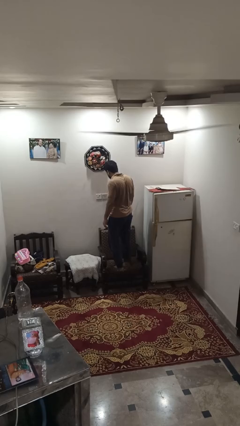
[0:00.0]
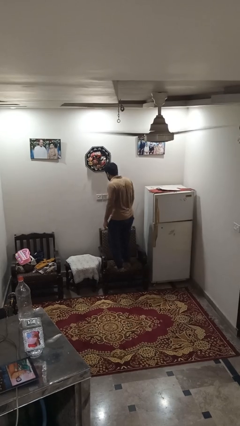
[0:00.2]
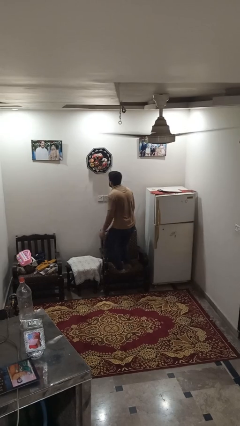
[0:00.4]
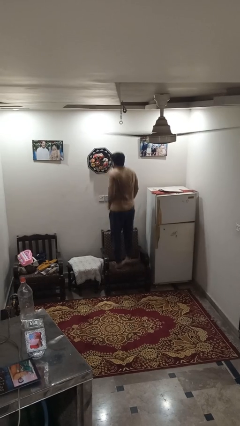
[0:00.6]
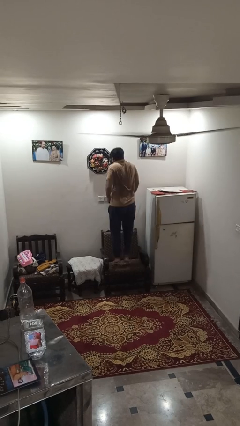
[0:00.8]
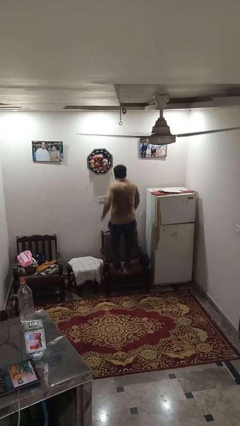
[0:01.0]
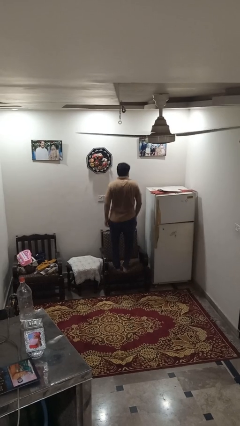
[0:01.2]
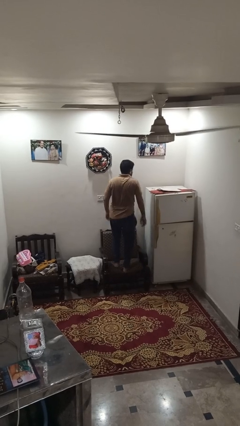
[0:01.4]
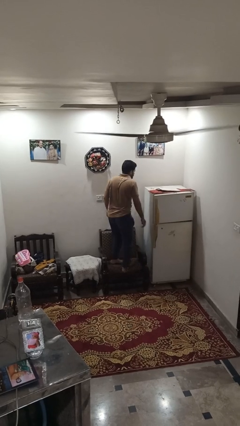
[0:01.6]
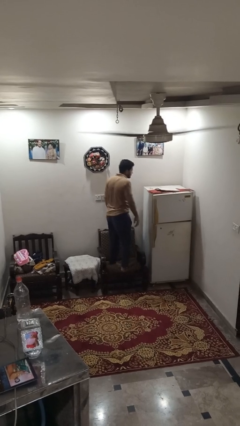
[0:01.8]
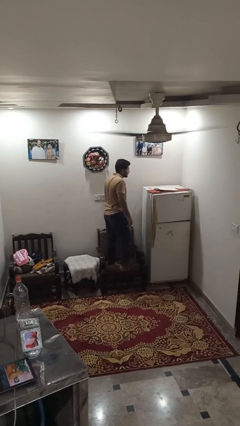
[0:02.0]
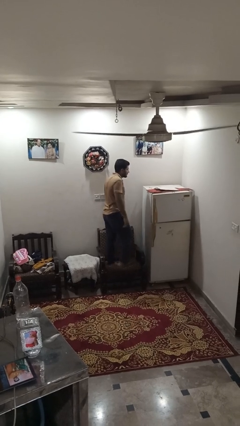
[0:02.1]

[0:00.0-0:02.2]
person jumps on couch

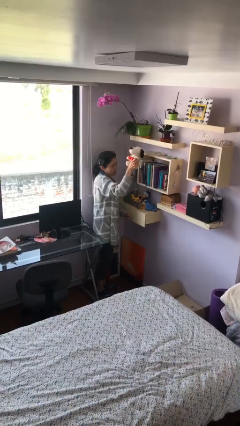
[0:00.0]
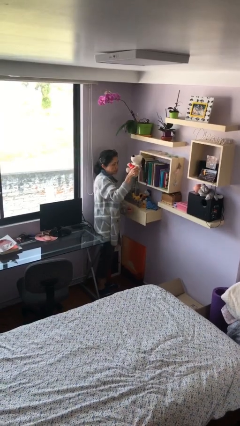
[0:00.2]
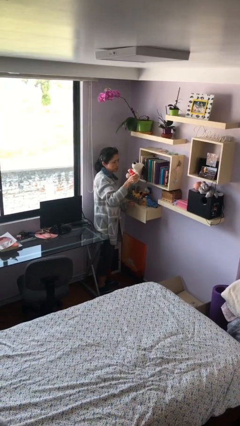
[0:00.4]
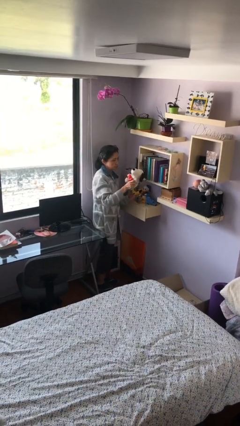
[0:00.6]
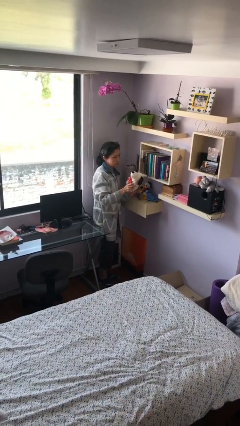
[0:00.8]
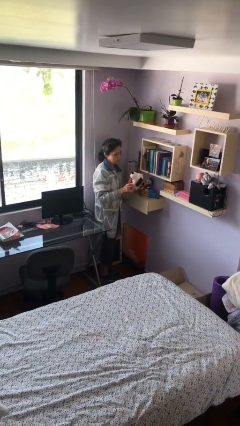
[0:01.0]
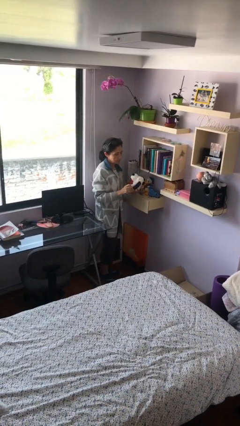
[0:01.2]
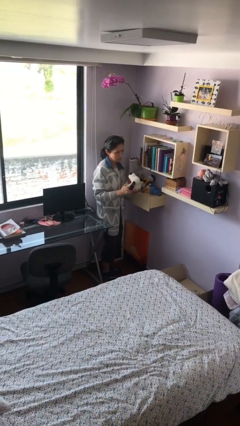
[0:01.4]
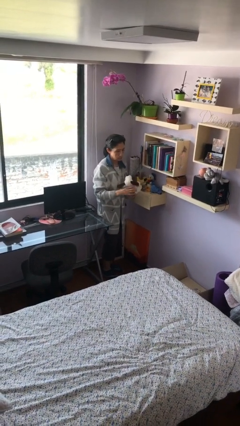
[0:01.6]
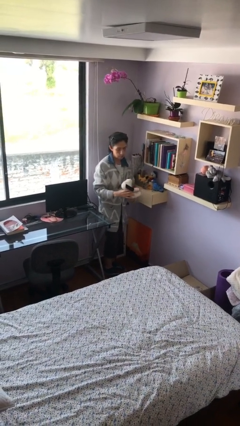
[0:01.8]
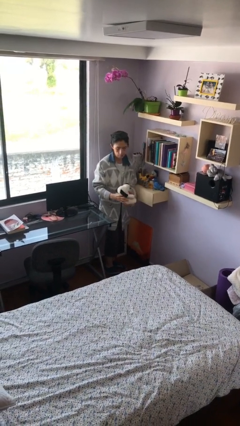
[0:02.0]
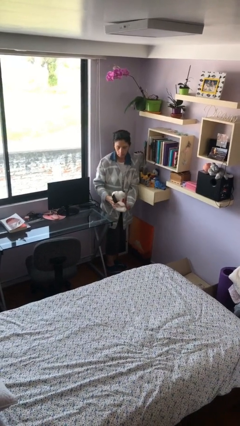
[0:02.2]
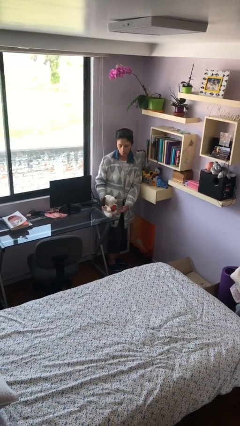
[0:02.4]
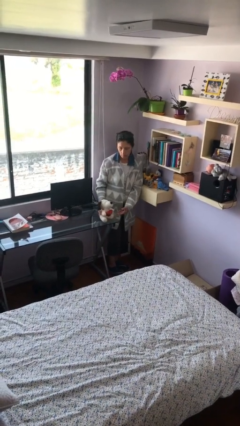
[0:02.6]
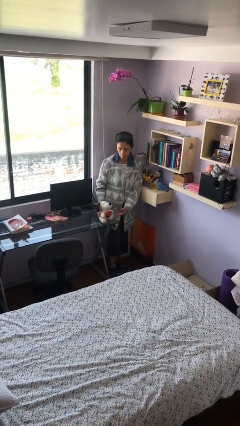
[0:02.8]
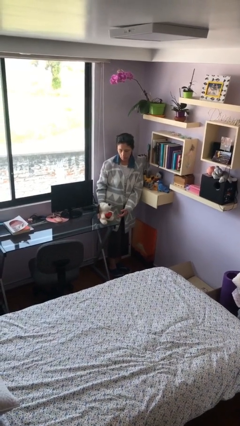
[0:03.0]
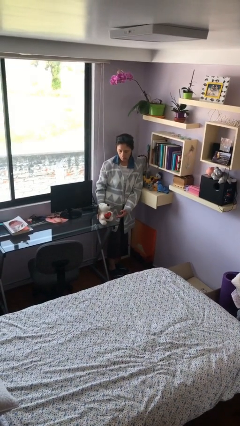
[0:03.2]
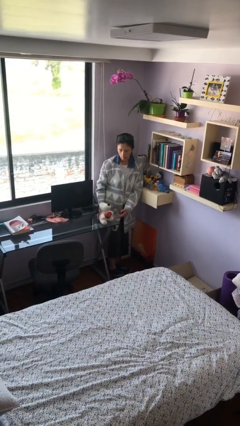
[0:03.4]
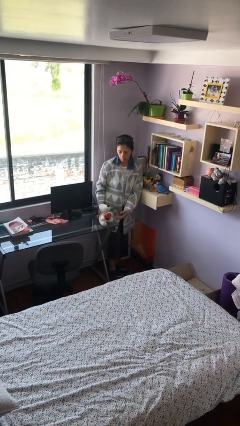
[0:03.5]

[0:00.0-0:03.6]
person puts down object on table

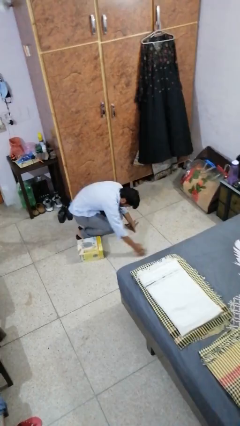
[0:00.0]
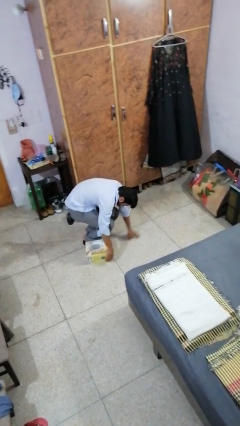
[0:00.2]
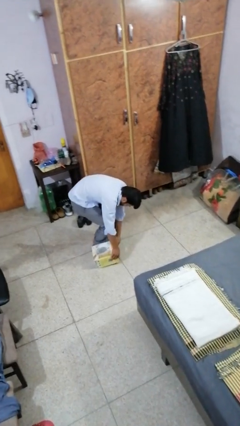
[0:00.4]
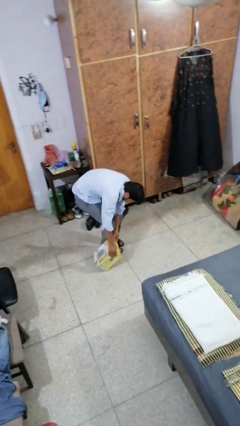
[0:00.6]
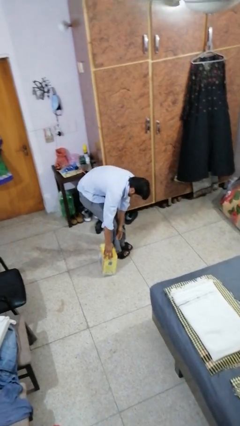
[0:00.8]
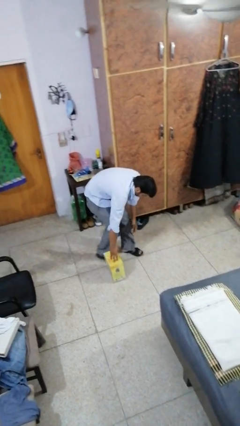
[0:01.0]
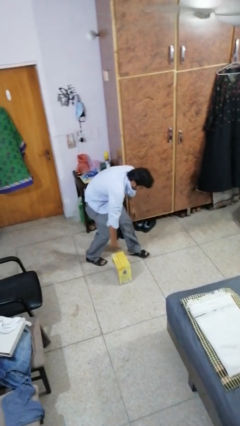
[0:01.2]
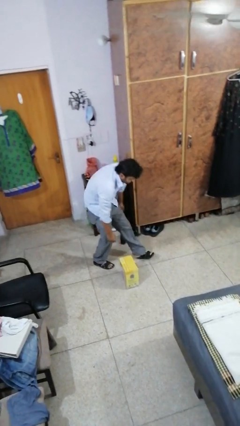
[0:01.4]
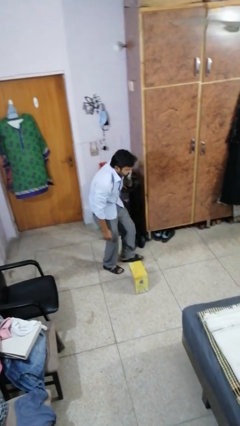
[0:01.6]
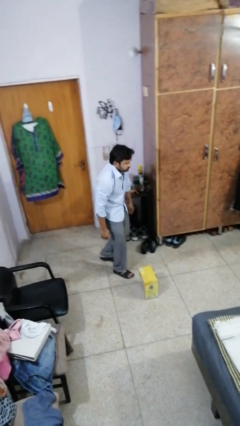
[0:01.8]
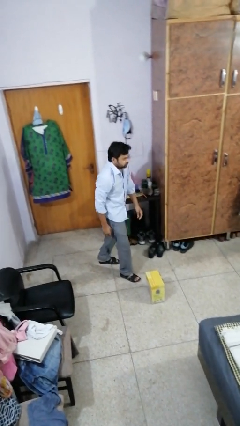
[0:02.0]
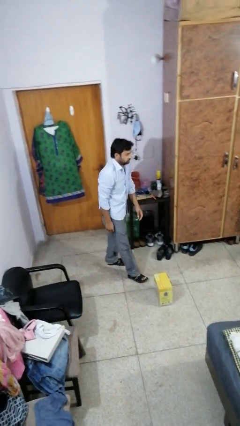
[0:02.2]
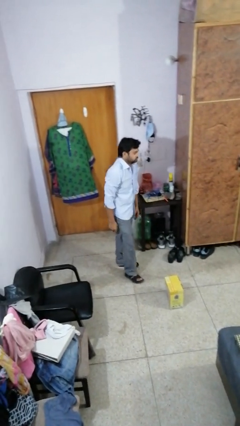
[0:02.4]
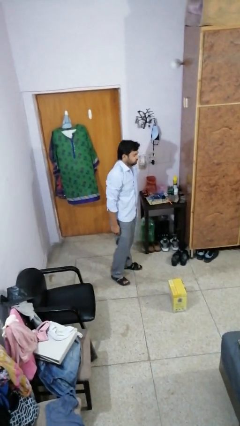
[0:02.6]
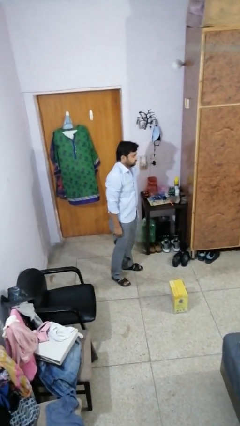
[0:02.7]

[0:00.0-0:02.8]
person stands up from floor

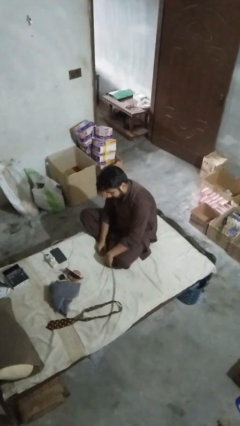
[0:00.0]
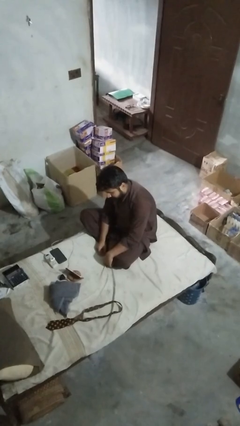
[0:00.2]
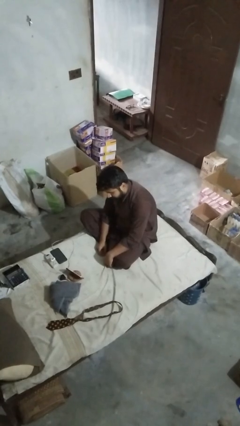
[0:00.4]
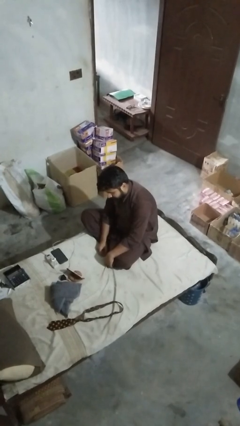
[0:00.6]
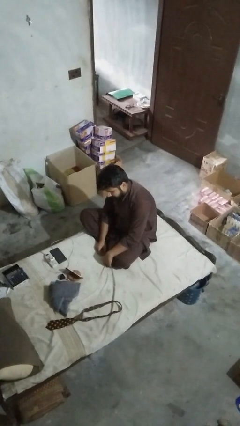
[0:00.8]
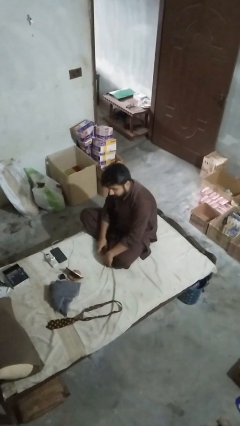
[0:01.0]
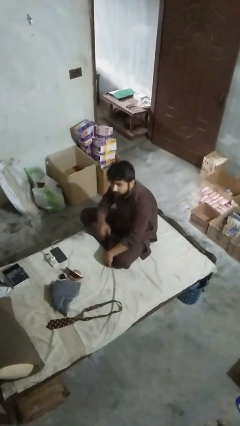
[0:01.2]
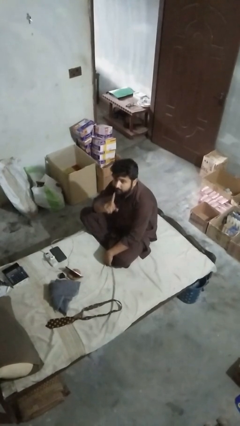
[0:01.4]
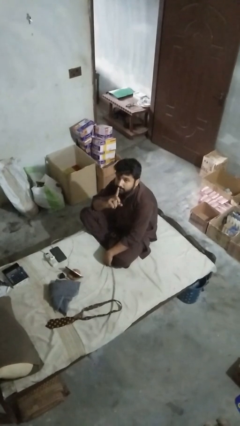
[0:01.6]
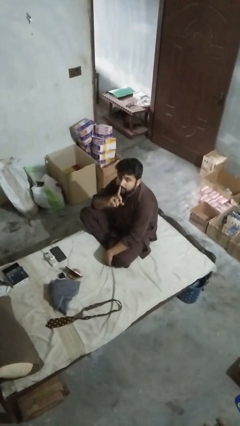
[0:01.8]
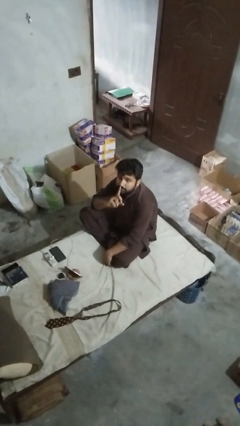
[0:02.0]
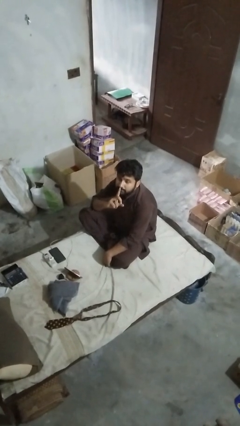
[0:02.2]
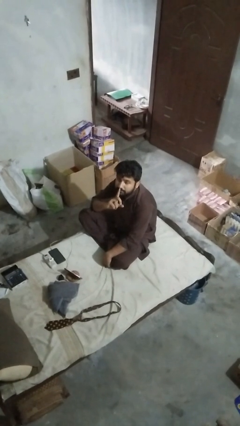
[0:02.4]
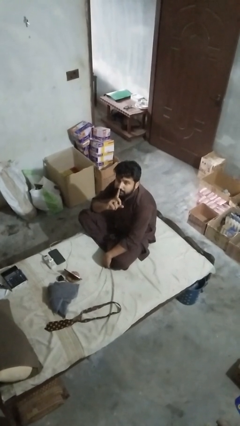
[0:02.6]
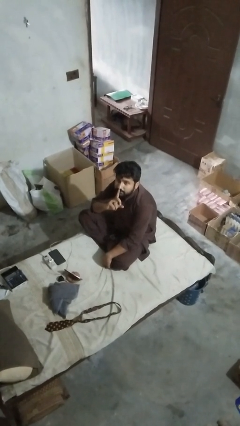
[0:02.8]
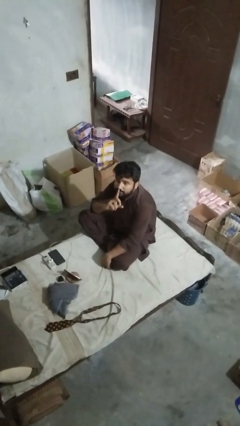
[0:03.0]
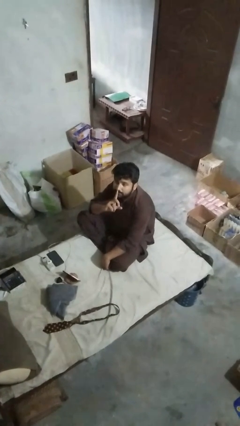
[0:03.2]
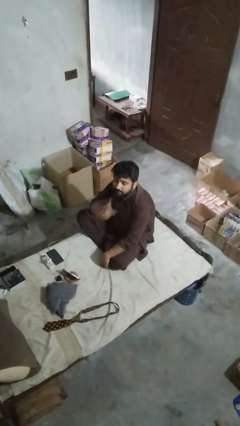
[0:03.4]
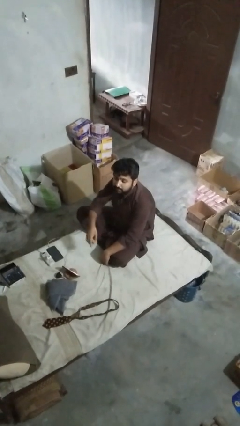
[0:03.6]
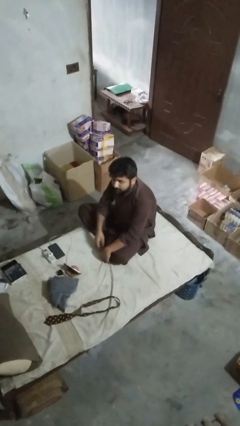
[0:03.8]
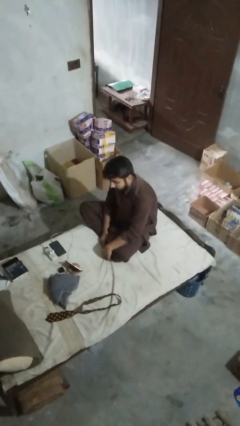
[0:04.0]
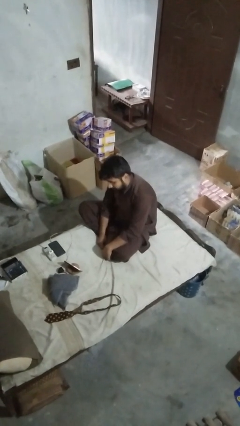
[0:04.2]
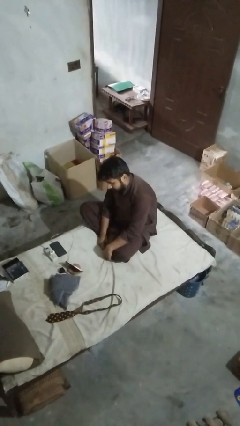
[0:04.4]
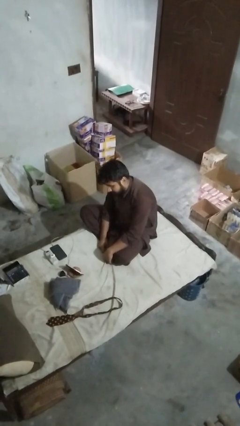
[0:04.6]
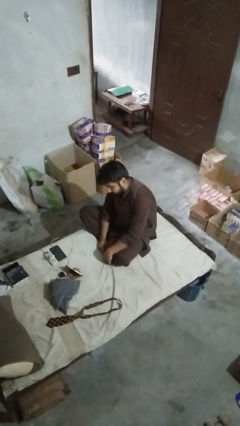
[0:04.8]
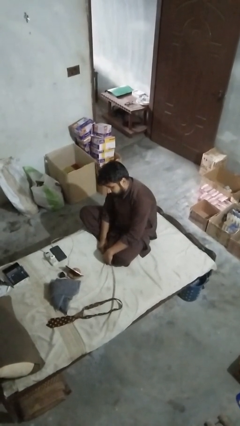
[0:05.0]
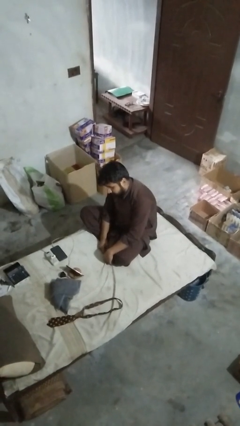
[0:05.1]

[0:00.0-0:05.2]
person gestures be quiet

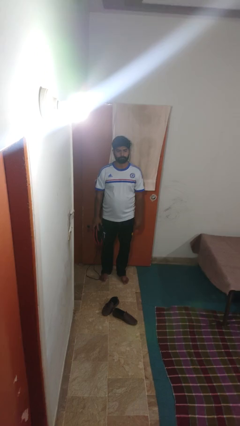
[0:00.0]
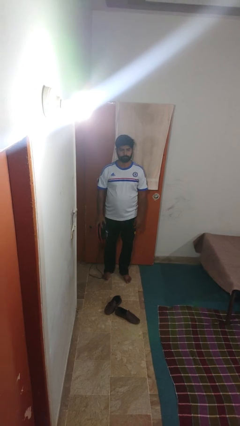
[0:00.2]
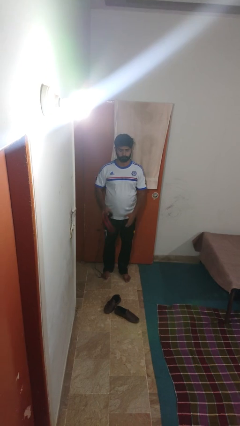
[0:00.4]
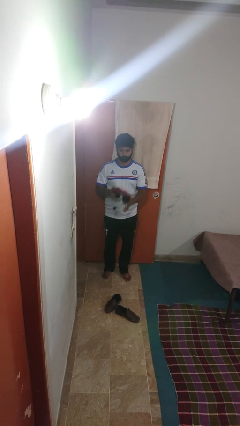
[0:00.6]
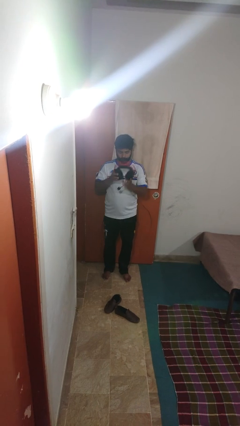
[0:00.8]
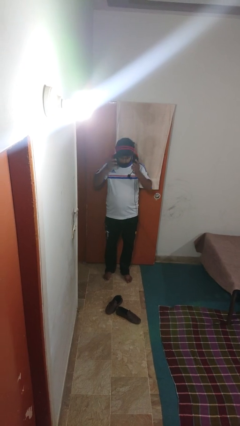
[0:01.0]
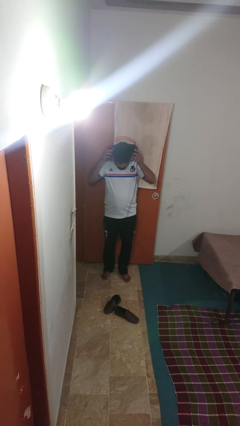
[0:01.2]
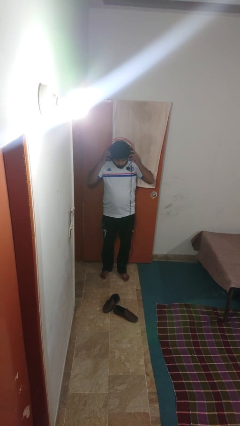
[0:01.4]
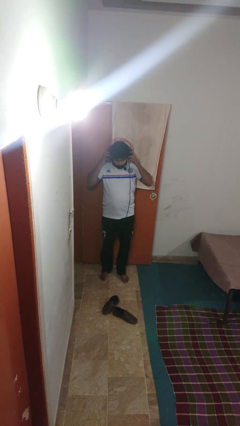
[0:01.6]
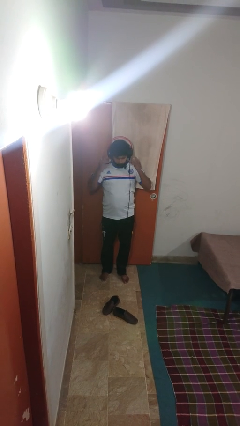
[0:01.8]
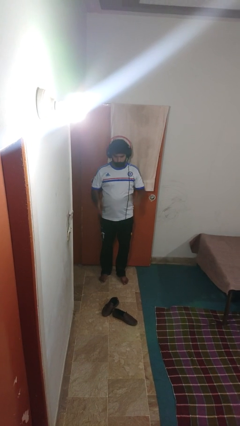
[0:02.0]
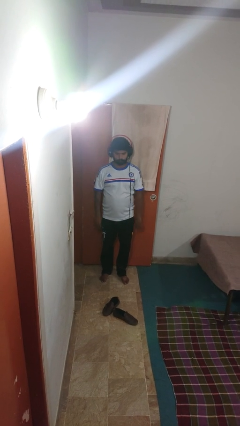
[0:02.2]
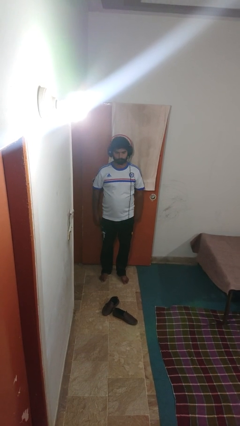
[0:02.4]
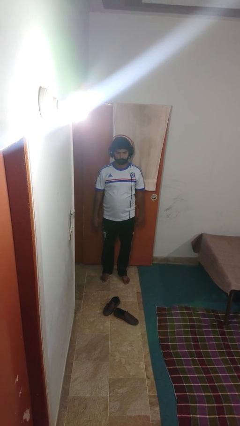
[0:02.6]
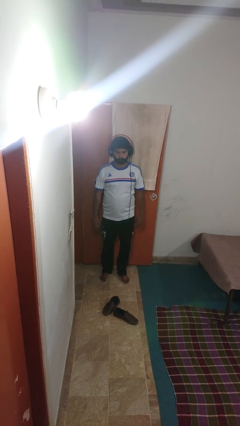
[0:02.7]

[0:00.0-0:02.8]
person puts on headphones

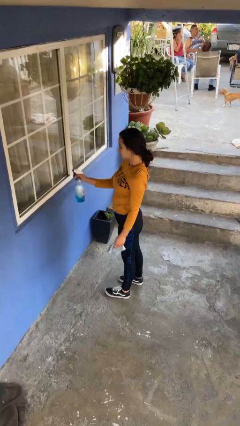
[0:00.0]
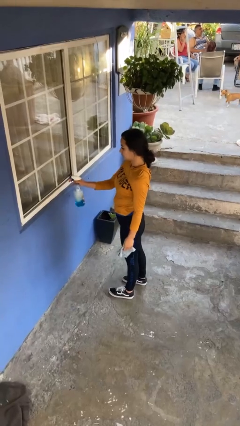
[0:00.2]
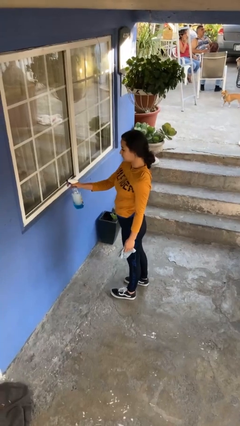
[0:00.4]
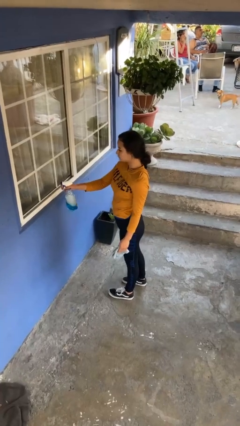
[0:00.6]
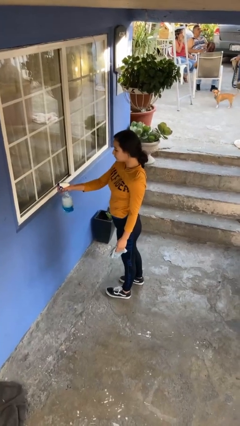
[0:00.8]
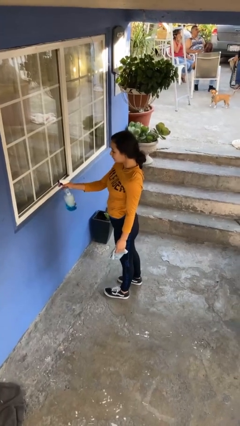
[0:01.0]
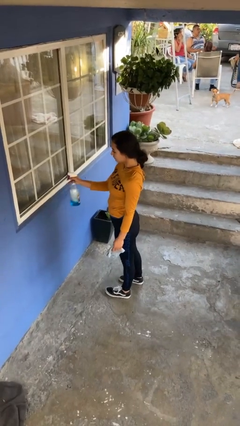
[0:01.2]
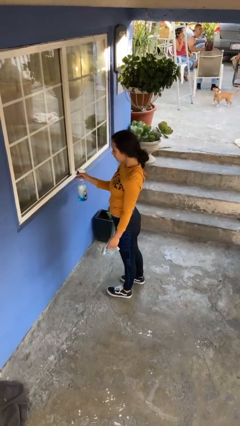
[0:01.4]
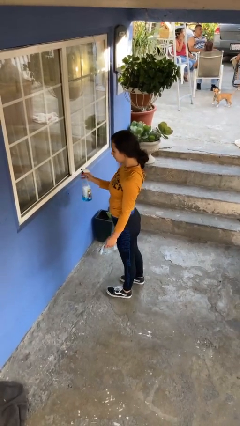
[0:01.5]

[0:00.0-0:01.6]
person sprays from bottle
